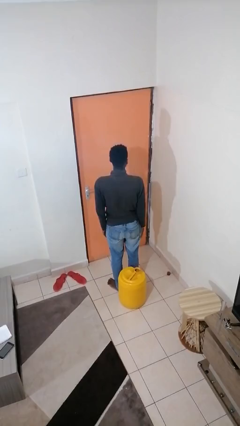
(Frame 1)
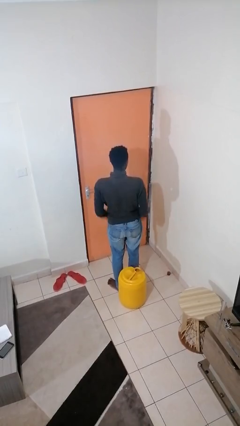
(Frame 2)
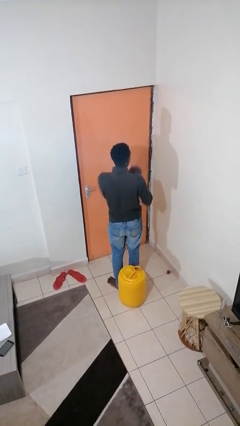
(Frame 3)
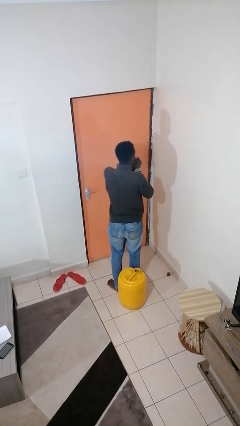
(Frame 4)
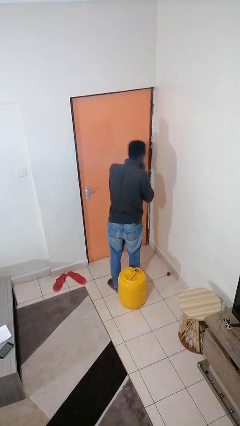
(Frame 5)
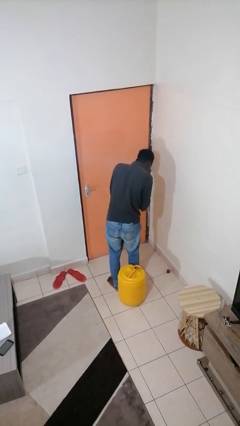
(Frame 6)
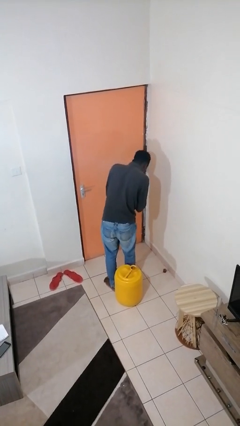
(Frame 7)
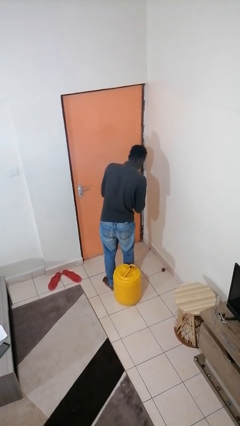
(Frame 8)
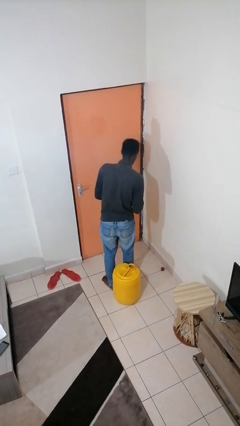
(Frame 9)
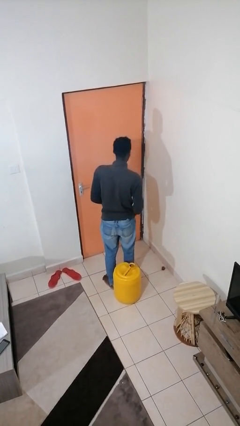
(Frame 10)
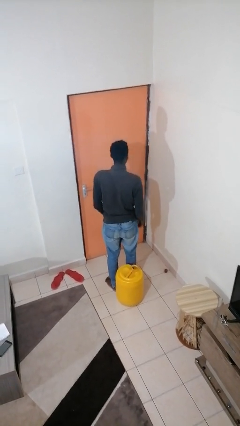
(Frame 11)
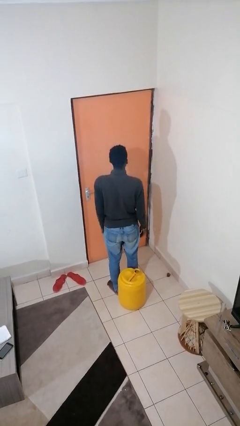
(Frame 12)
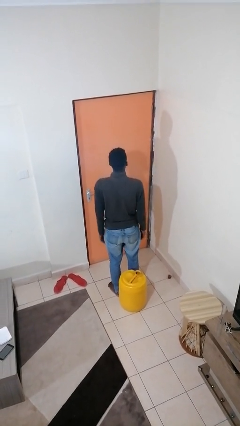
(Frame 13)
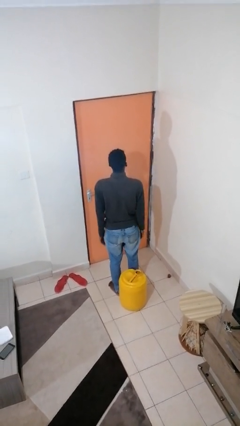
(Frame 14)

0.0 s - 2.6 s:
person sneezes into hand

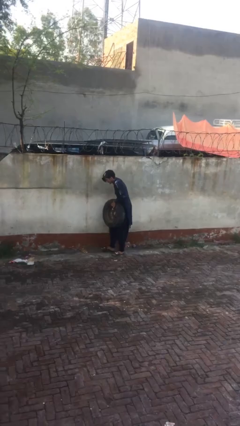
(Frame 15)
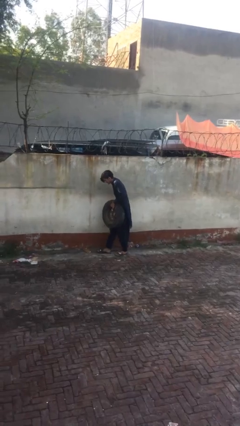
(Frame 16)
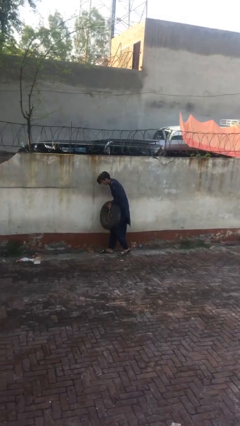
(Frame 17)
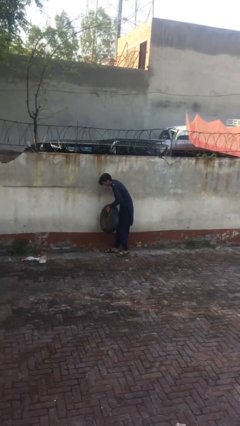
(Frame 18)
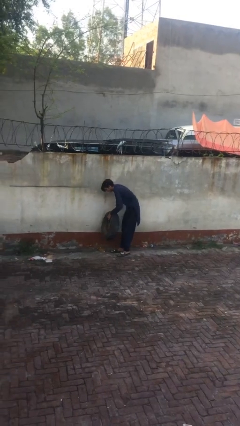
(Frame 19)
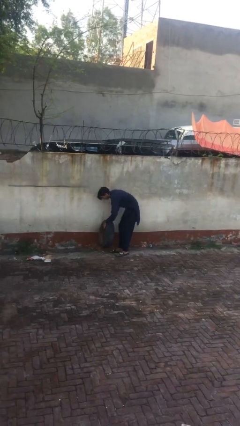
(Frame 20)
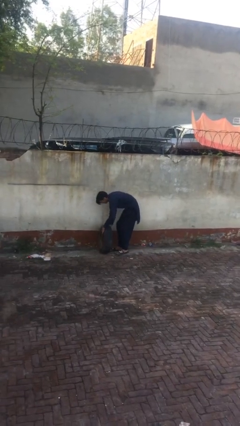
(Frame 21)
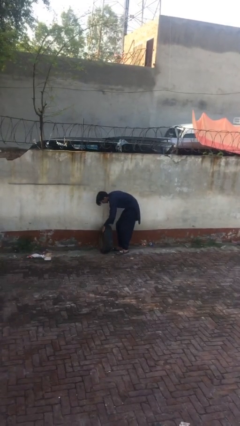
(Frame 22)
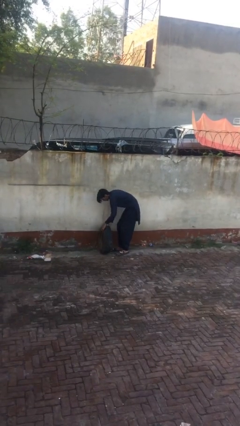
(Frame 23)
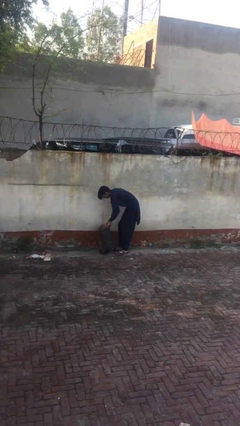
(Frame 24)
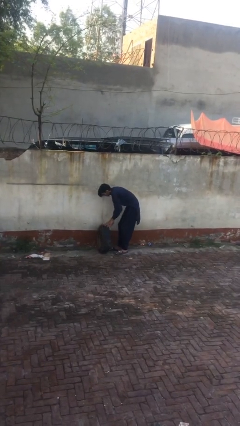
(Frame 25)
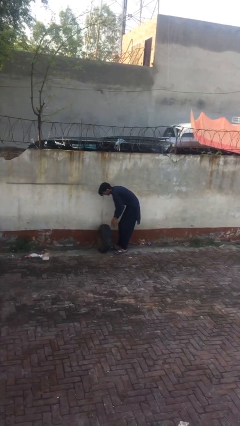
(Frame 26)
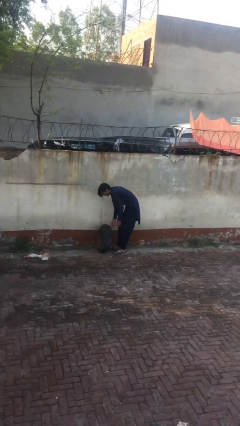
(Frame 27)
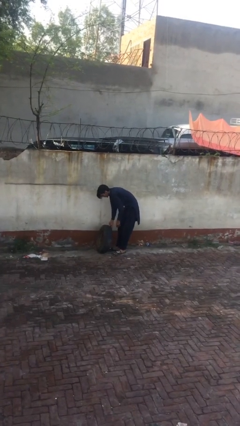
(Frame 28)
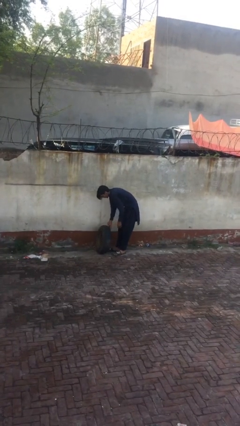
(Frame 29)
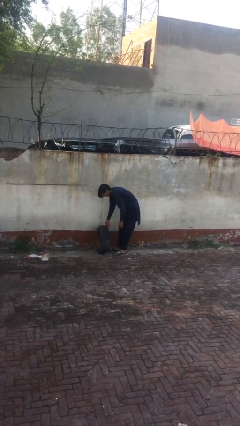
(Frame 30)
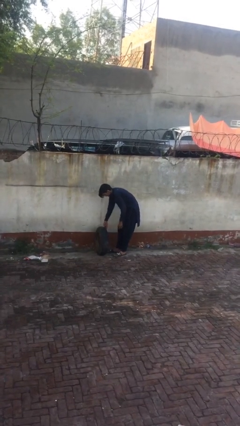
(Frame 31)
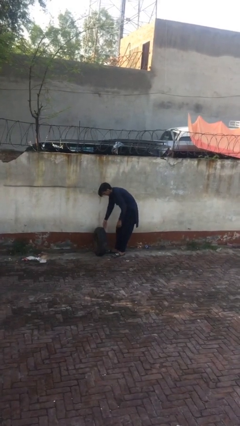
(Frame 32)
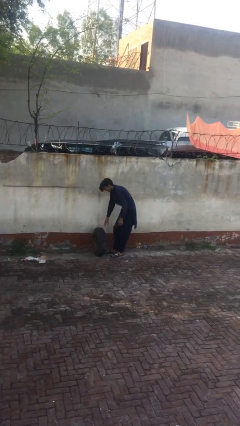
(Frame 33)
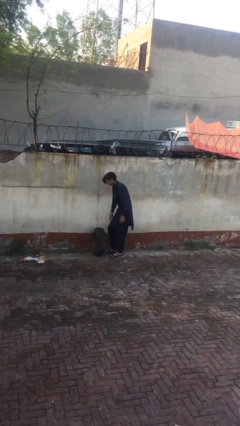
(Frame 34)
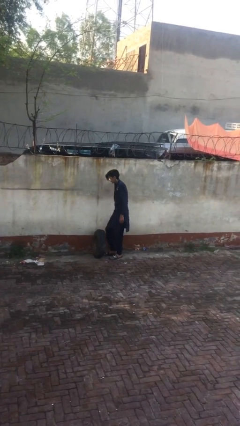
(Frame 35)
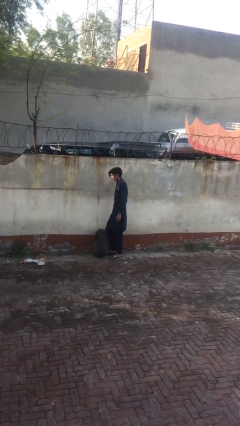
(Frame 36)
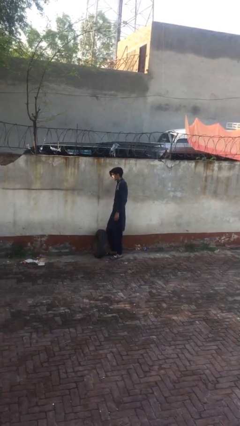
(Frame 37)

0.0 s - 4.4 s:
person puts down object on floor

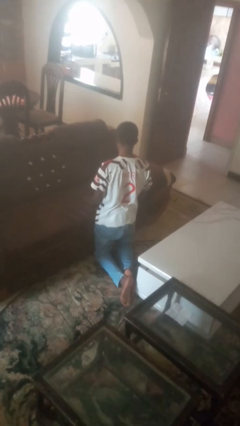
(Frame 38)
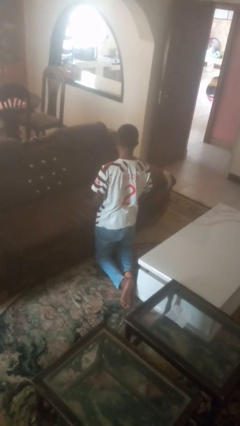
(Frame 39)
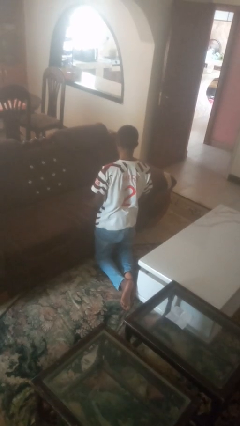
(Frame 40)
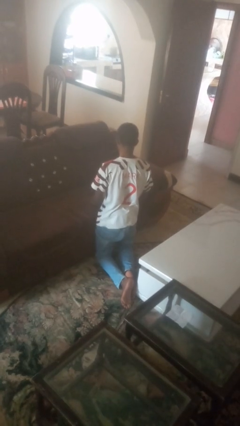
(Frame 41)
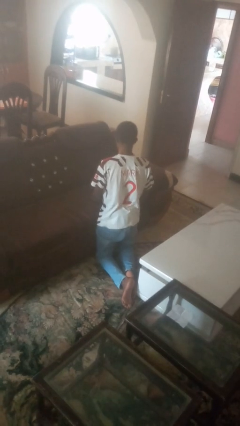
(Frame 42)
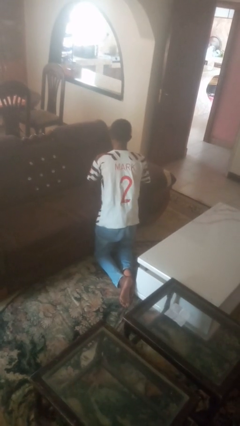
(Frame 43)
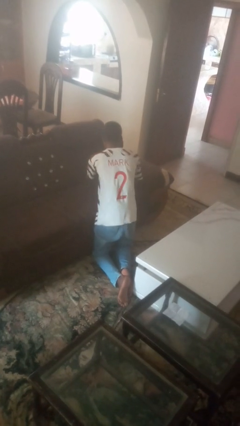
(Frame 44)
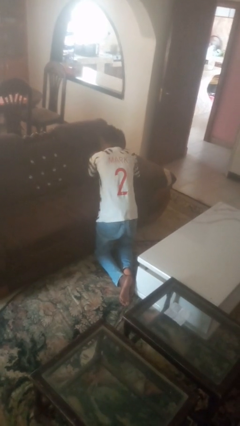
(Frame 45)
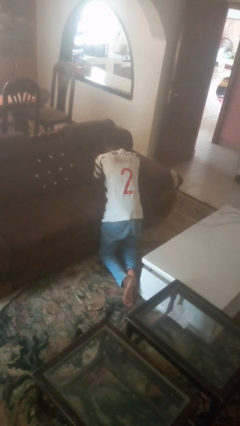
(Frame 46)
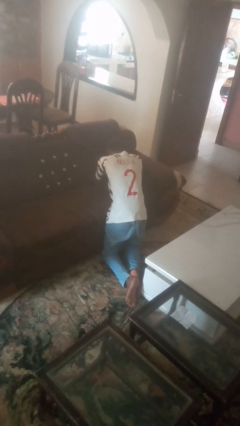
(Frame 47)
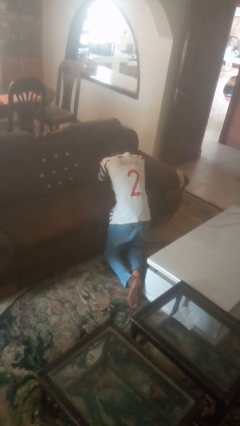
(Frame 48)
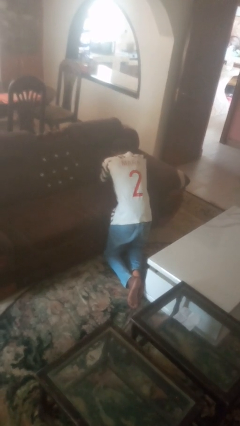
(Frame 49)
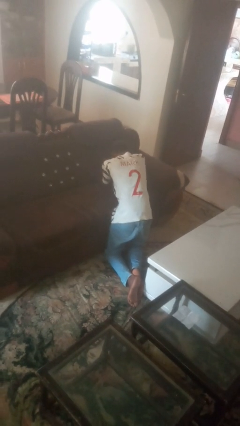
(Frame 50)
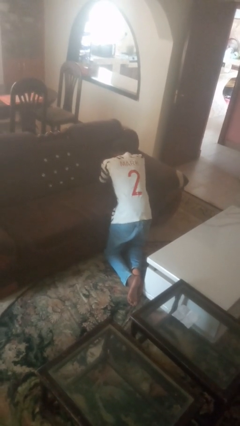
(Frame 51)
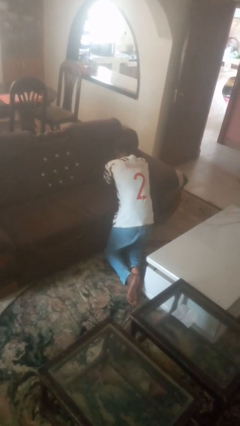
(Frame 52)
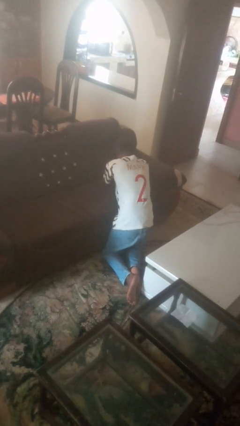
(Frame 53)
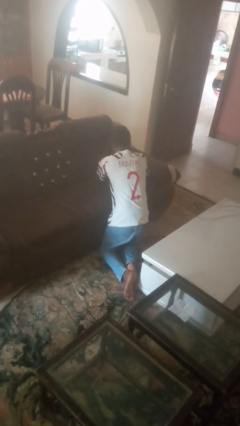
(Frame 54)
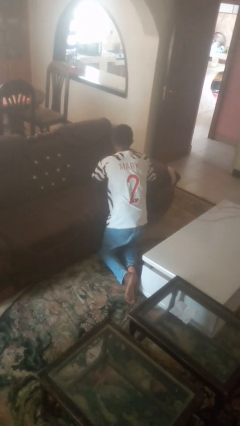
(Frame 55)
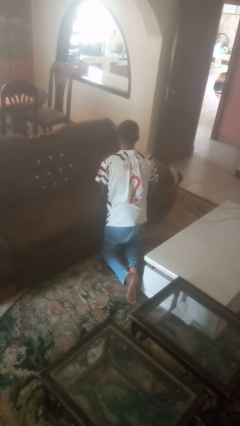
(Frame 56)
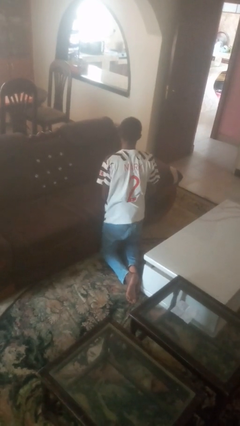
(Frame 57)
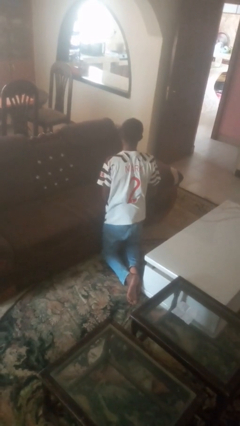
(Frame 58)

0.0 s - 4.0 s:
person searches in couch

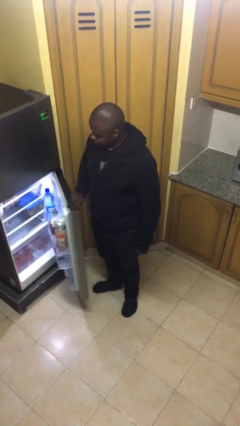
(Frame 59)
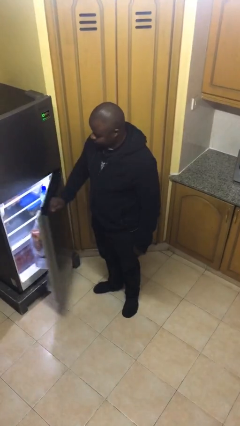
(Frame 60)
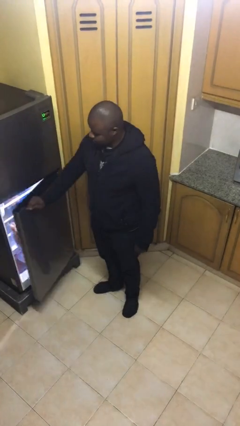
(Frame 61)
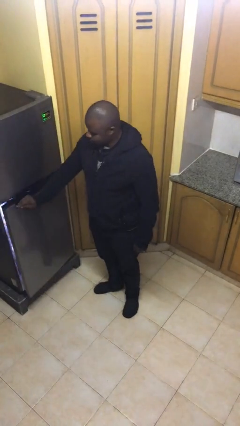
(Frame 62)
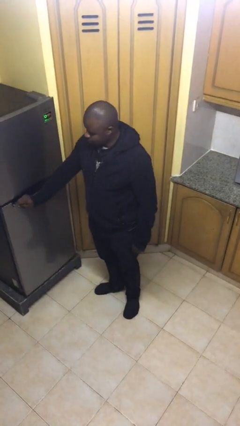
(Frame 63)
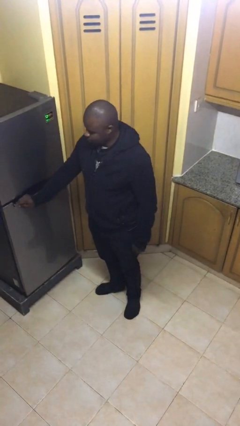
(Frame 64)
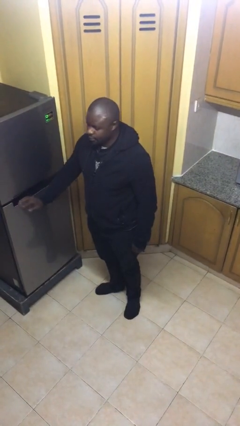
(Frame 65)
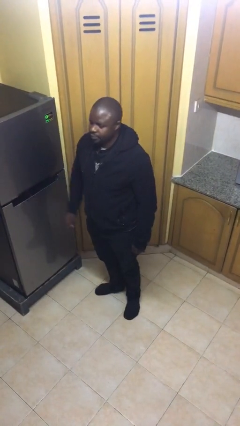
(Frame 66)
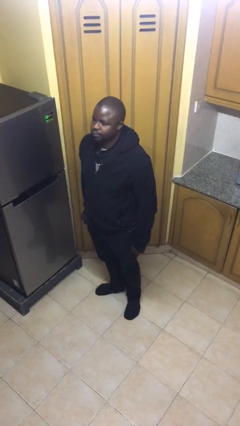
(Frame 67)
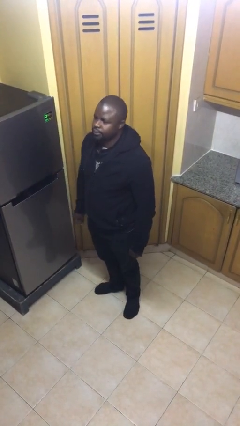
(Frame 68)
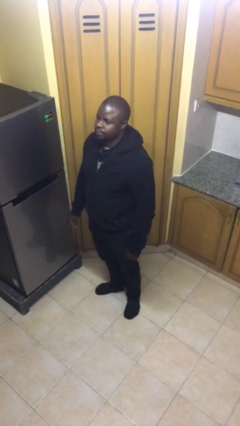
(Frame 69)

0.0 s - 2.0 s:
person closes refrigerator

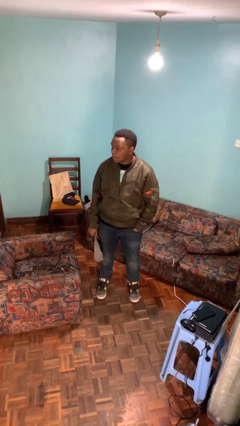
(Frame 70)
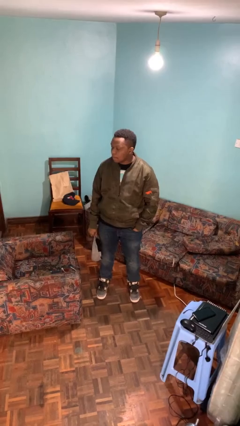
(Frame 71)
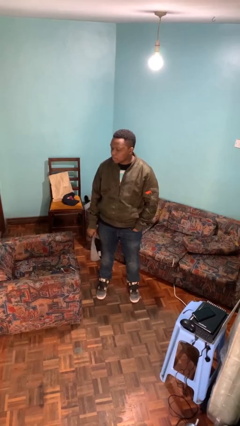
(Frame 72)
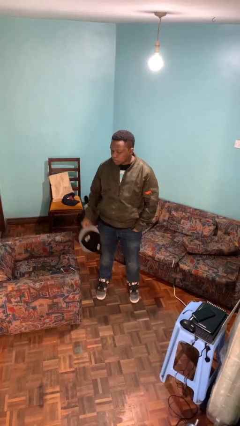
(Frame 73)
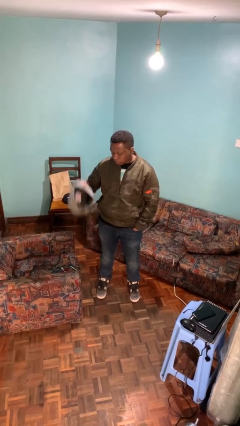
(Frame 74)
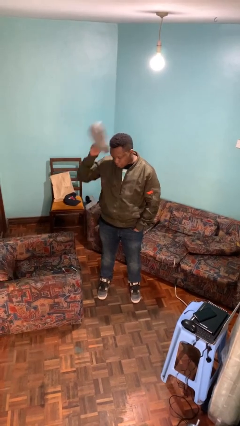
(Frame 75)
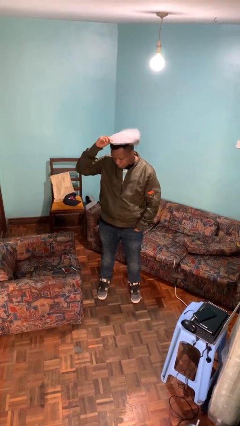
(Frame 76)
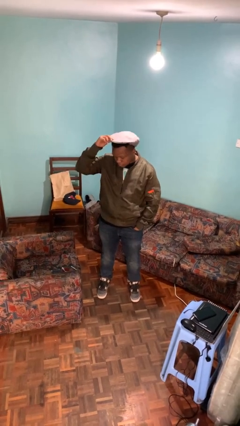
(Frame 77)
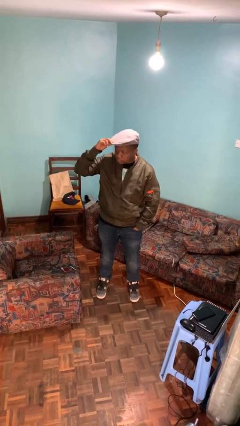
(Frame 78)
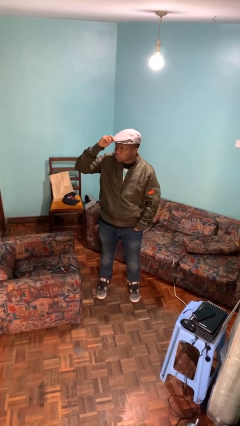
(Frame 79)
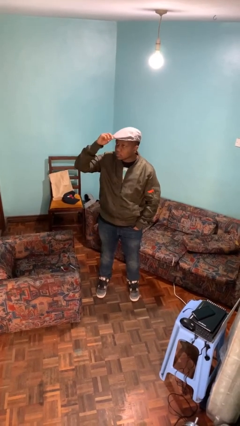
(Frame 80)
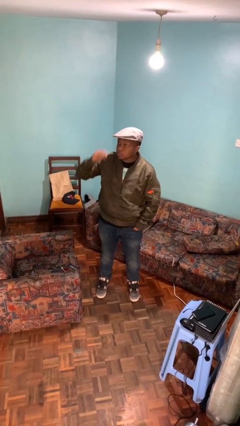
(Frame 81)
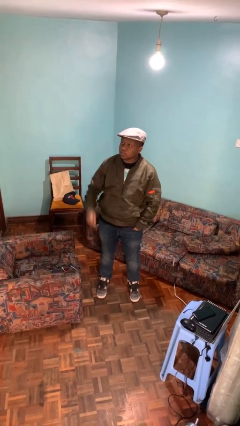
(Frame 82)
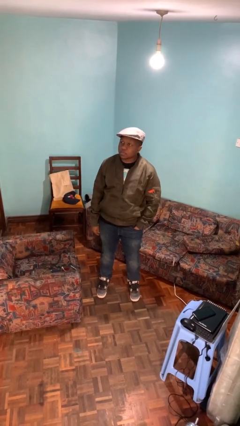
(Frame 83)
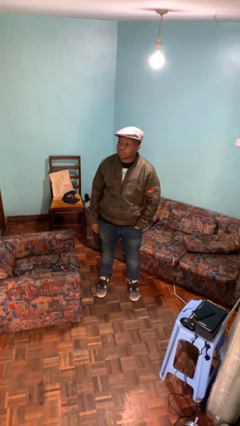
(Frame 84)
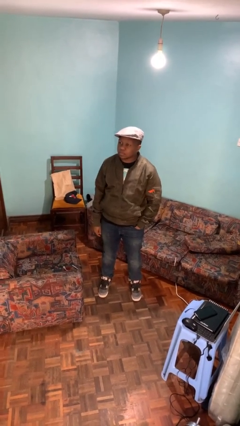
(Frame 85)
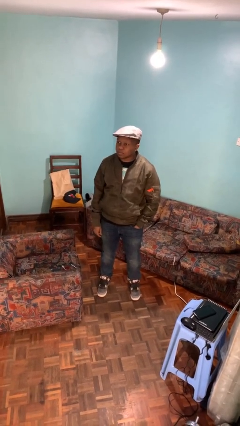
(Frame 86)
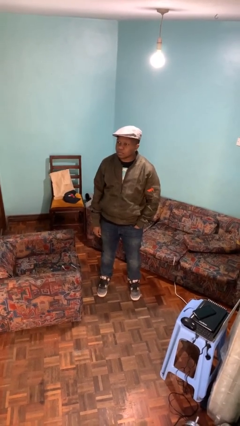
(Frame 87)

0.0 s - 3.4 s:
person puts on hat

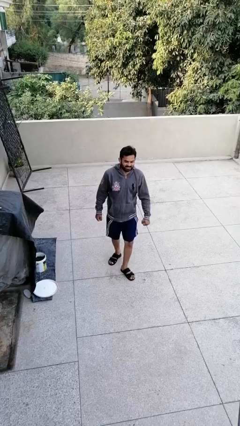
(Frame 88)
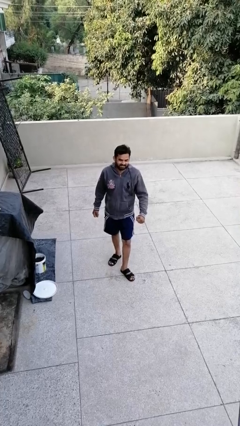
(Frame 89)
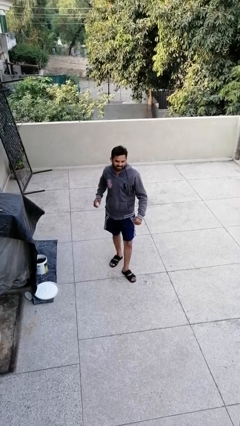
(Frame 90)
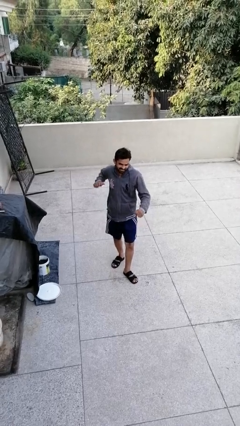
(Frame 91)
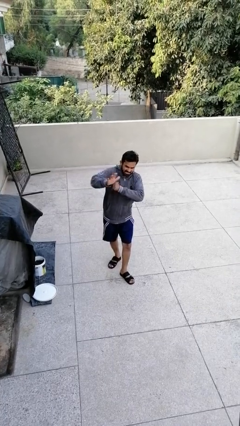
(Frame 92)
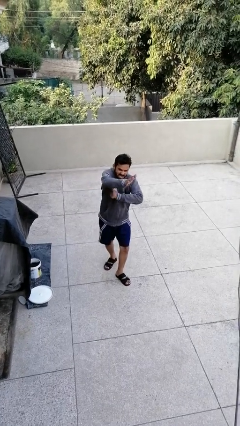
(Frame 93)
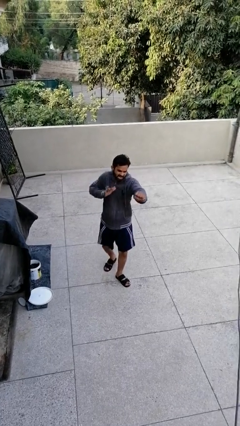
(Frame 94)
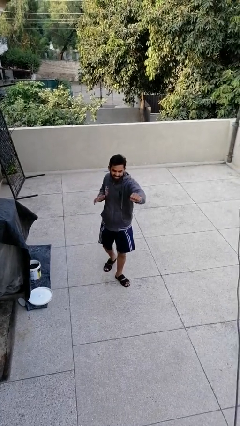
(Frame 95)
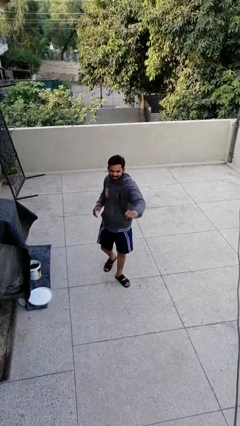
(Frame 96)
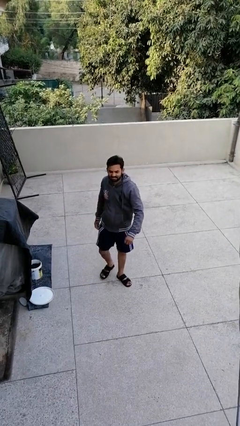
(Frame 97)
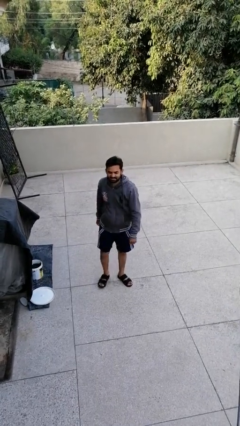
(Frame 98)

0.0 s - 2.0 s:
person karate chop
